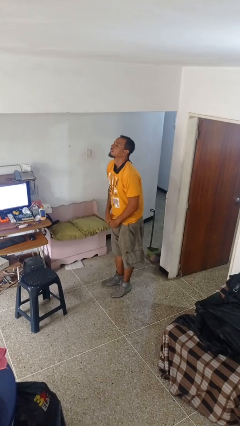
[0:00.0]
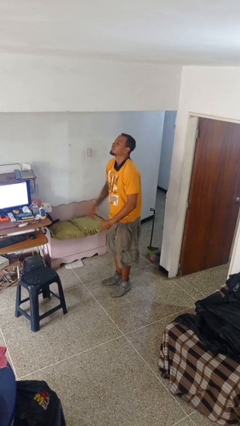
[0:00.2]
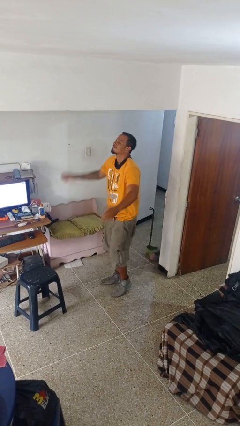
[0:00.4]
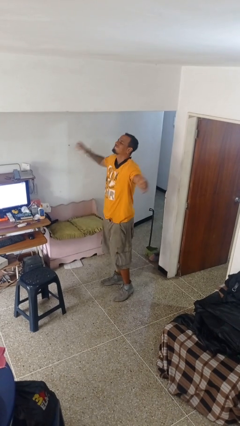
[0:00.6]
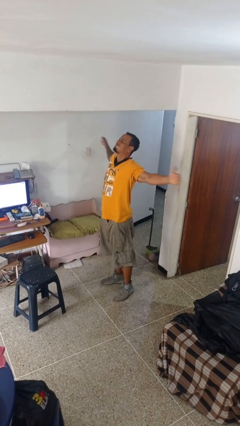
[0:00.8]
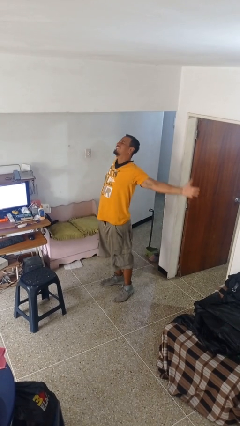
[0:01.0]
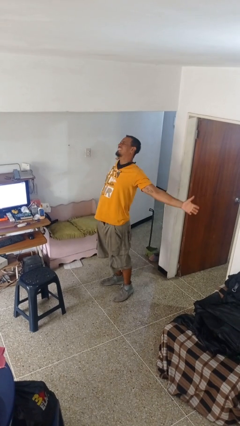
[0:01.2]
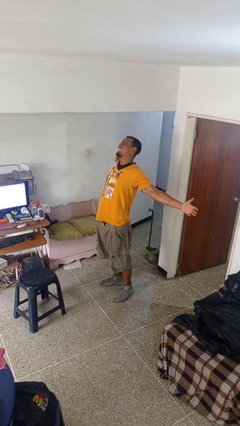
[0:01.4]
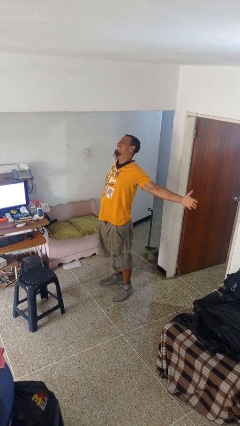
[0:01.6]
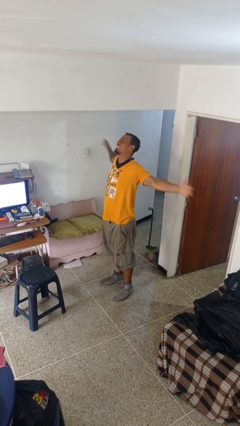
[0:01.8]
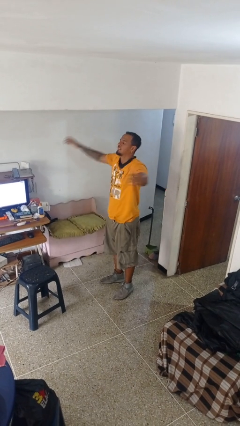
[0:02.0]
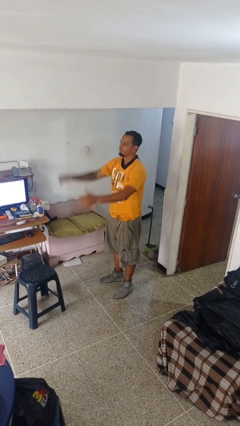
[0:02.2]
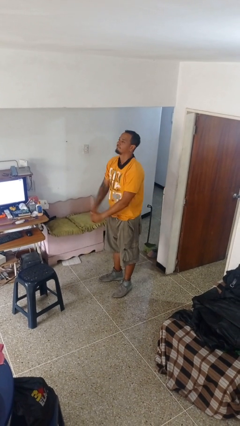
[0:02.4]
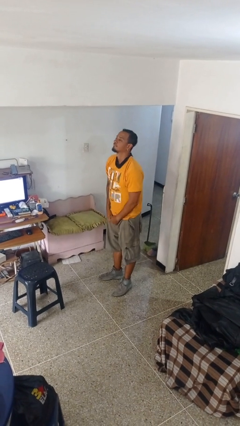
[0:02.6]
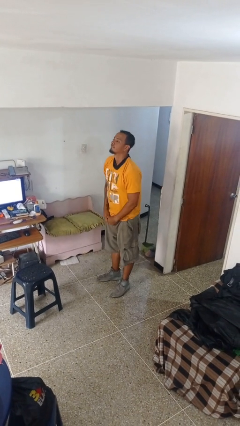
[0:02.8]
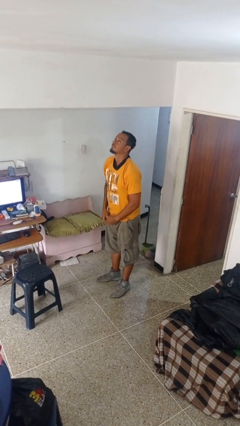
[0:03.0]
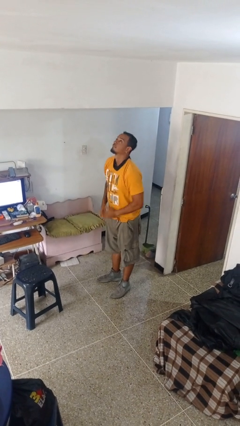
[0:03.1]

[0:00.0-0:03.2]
person stretches arms to side

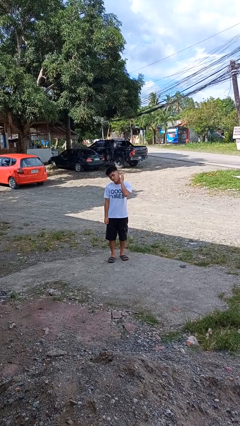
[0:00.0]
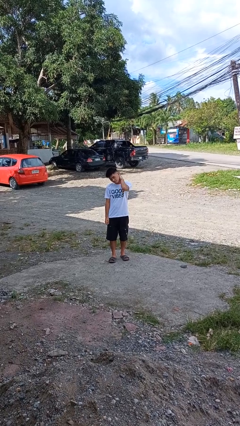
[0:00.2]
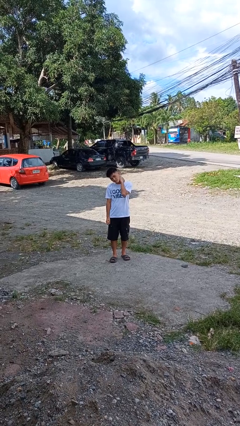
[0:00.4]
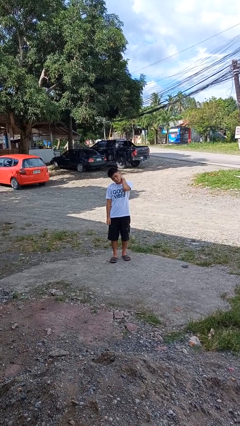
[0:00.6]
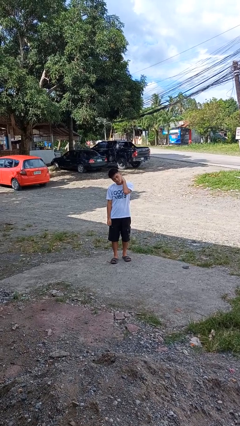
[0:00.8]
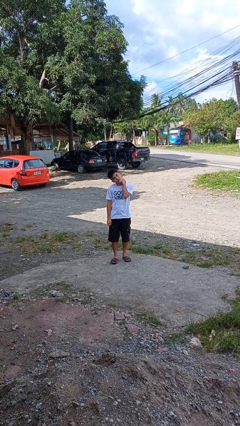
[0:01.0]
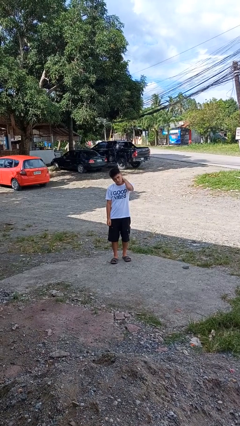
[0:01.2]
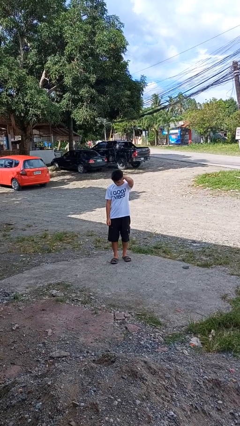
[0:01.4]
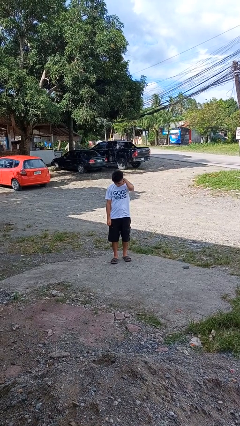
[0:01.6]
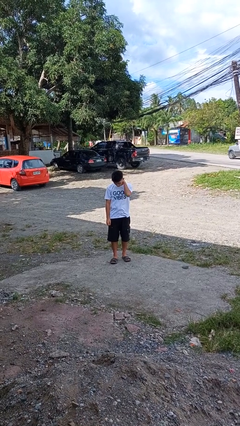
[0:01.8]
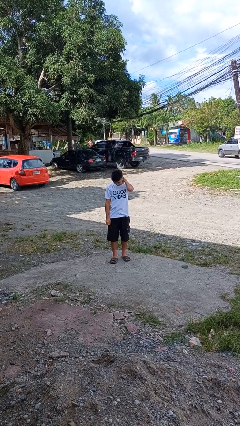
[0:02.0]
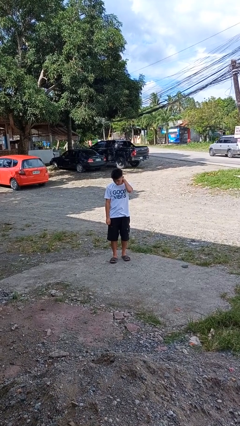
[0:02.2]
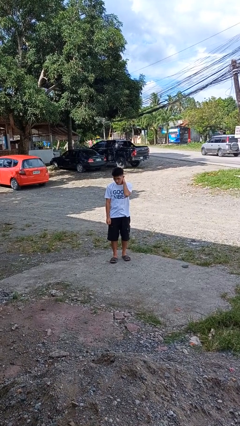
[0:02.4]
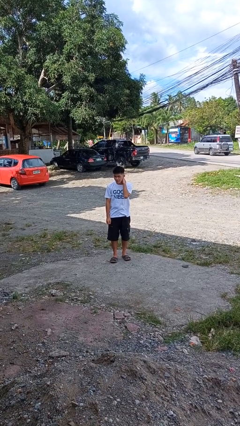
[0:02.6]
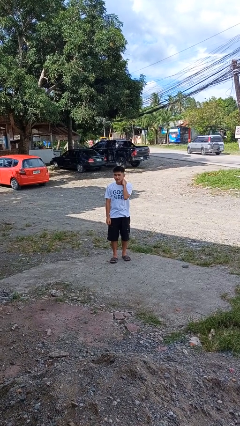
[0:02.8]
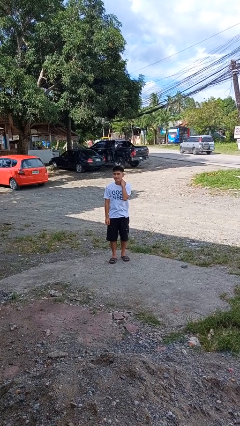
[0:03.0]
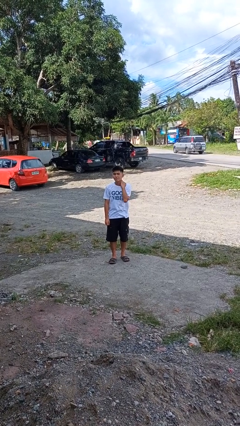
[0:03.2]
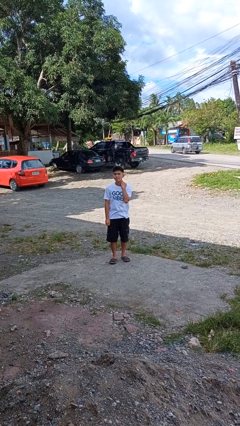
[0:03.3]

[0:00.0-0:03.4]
person rubs neck

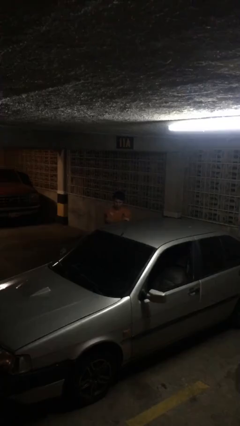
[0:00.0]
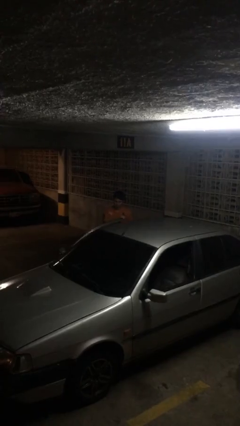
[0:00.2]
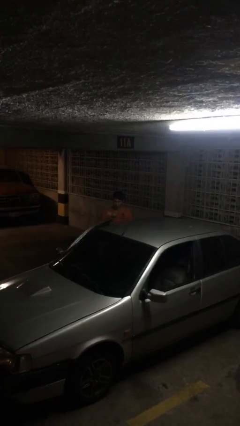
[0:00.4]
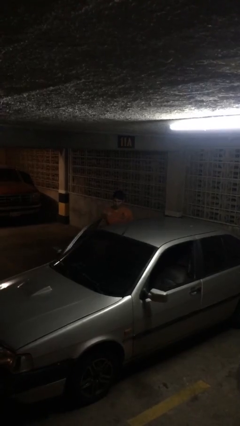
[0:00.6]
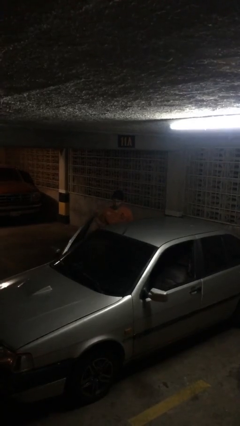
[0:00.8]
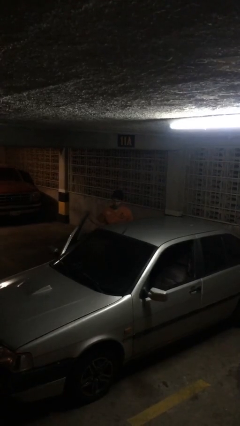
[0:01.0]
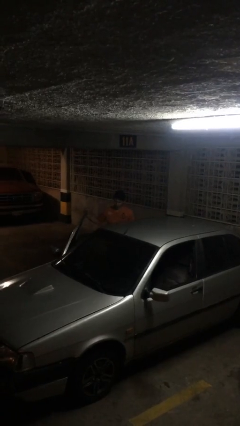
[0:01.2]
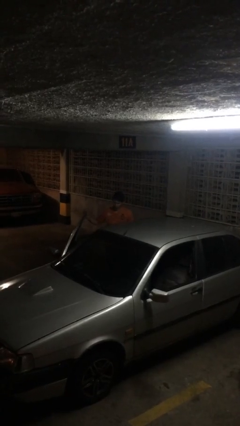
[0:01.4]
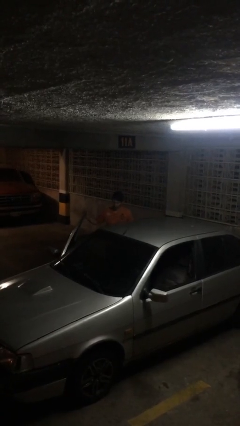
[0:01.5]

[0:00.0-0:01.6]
person opens car door

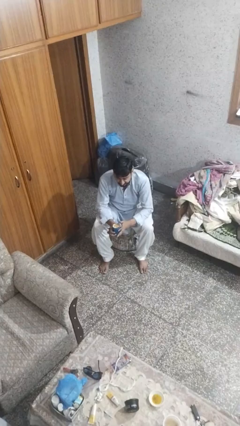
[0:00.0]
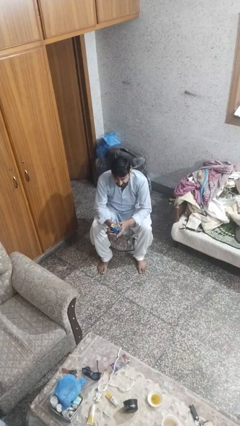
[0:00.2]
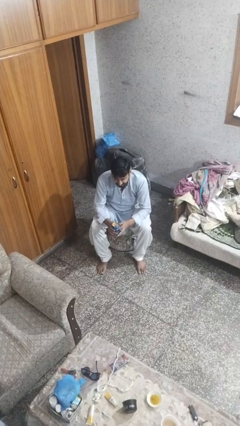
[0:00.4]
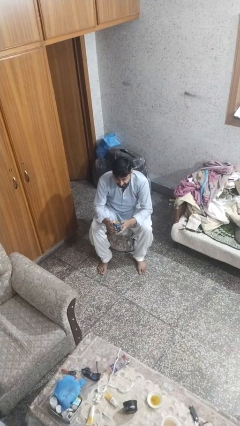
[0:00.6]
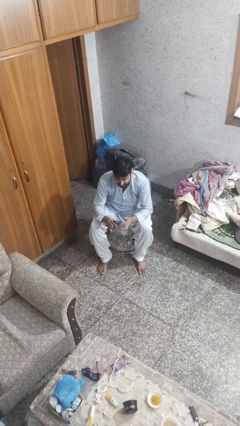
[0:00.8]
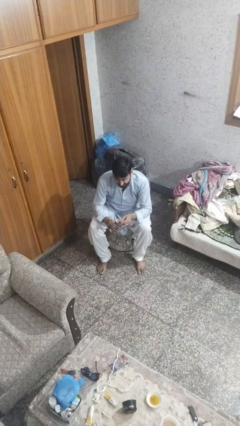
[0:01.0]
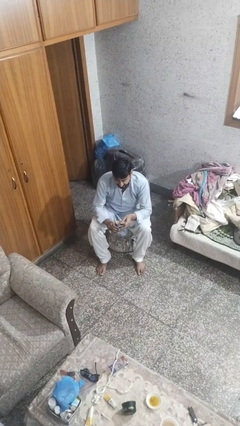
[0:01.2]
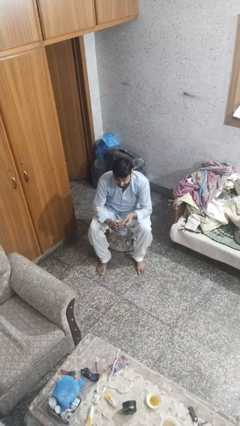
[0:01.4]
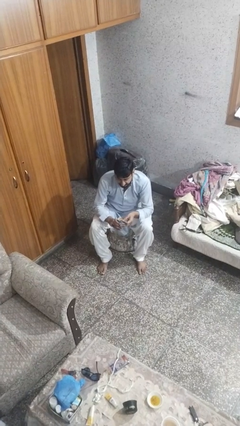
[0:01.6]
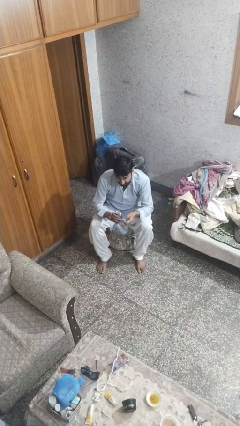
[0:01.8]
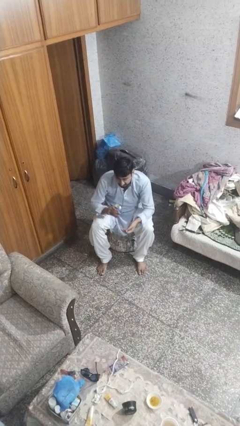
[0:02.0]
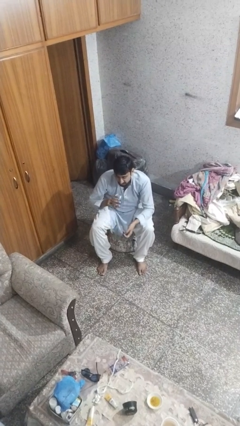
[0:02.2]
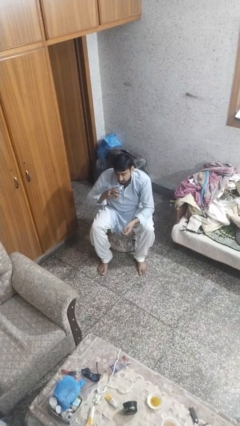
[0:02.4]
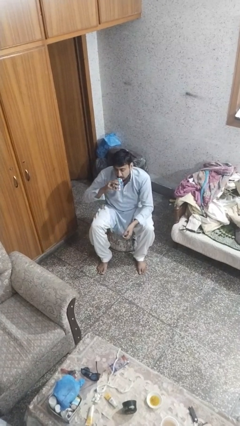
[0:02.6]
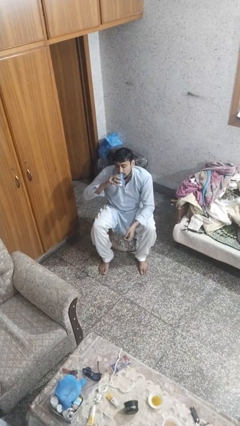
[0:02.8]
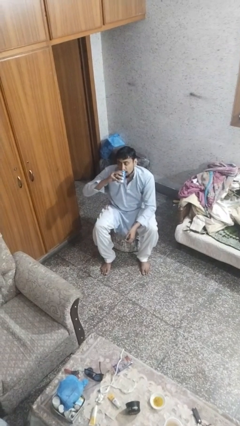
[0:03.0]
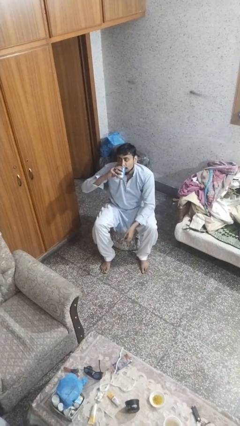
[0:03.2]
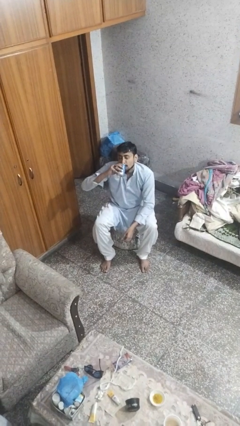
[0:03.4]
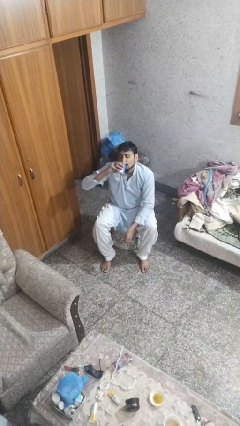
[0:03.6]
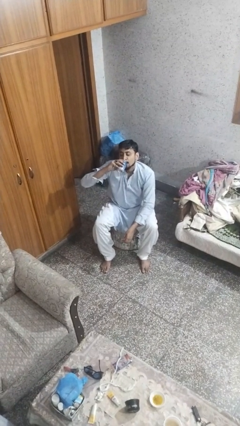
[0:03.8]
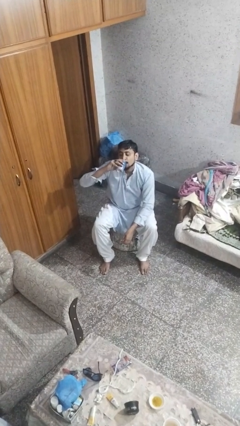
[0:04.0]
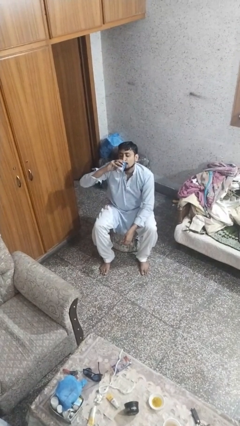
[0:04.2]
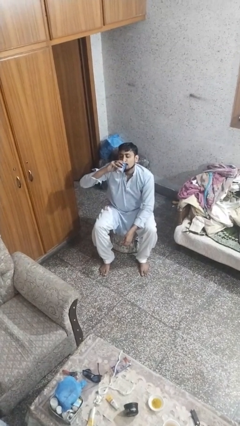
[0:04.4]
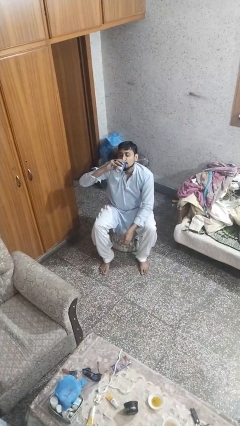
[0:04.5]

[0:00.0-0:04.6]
person drinks from beverage can

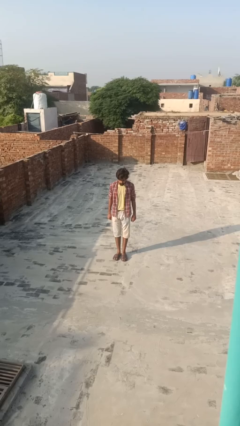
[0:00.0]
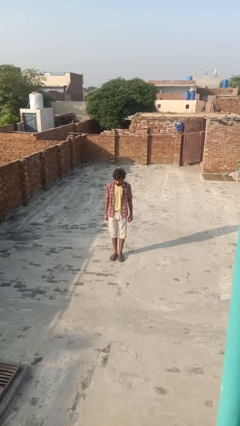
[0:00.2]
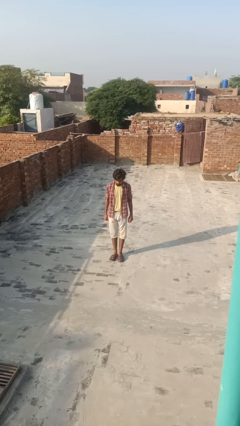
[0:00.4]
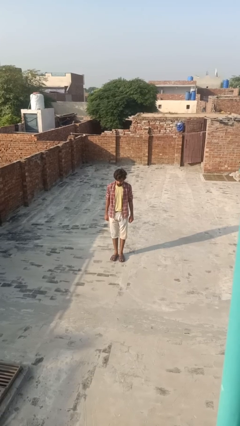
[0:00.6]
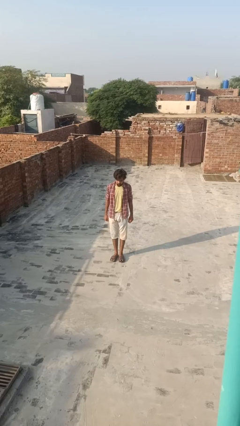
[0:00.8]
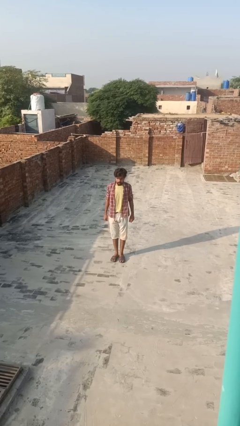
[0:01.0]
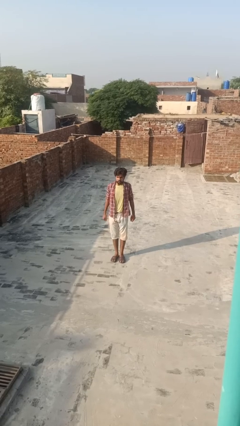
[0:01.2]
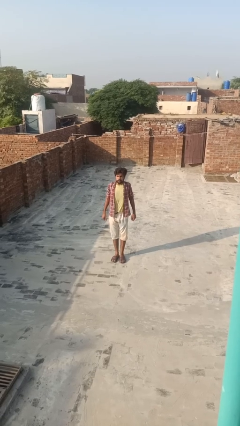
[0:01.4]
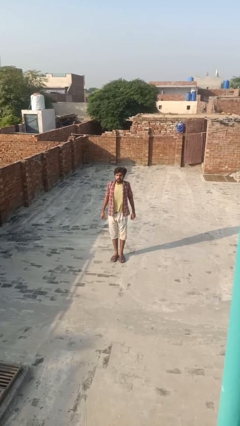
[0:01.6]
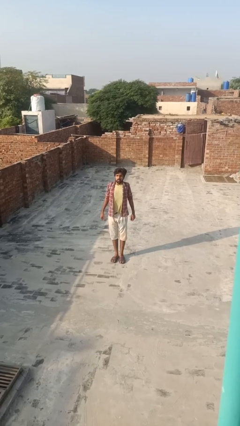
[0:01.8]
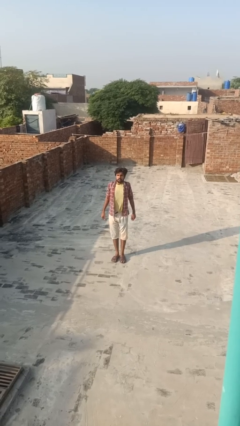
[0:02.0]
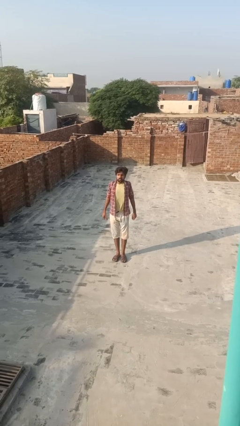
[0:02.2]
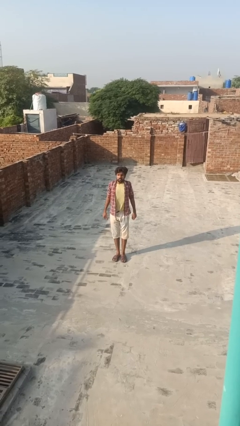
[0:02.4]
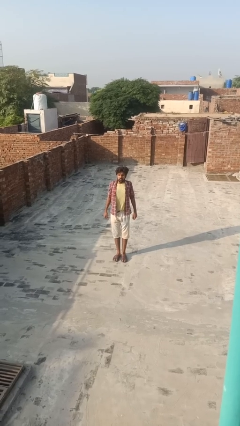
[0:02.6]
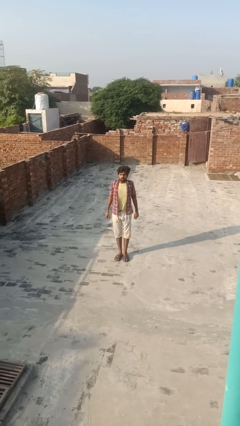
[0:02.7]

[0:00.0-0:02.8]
person exercises with lunges

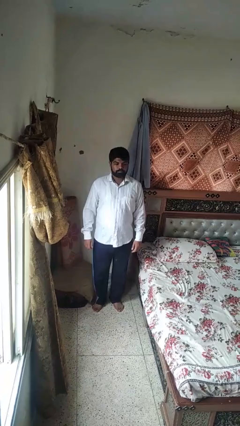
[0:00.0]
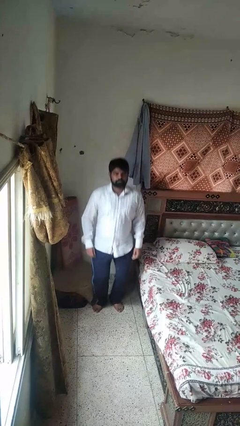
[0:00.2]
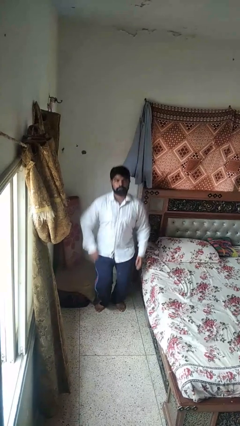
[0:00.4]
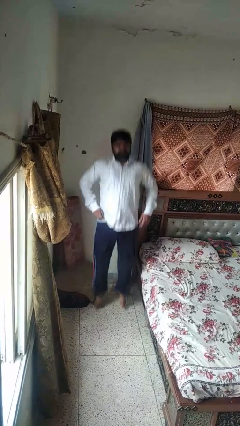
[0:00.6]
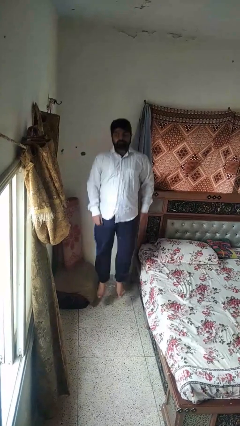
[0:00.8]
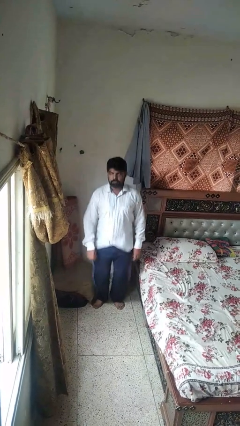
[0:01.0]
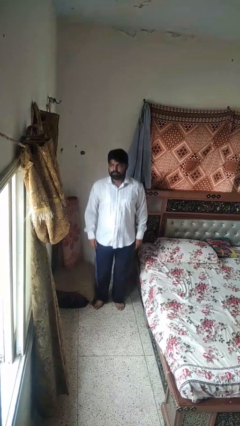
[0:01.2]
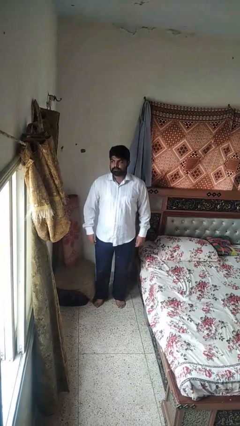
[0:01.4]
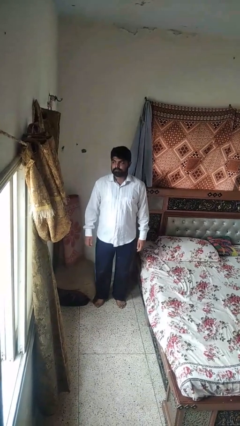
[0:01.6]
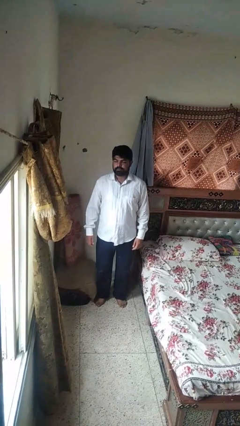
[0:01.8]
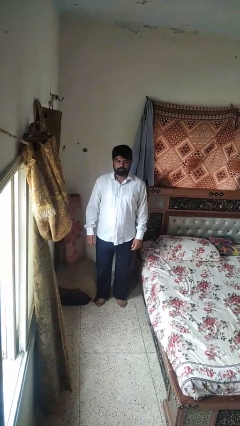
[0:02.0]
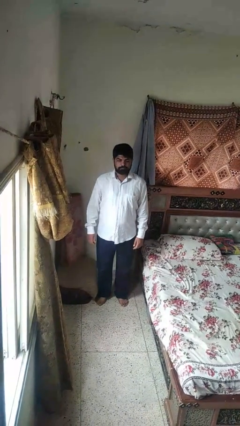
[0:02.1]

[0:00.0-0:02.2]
person jumps

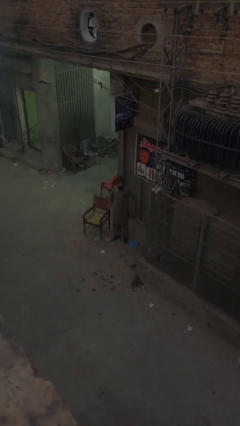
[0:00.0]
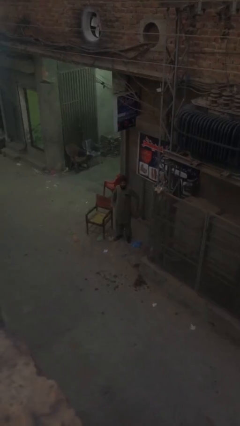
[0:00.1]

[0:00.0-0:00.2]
person sits down
